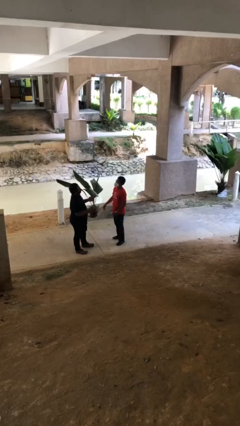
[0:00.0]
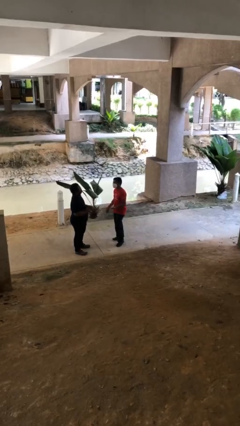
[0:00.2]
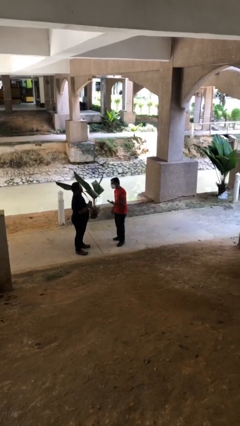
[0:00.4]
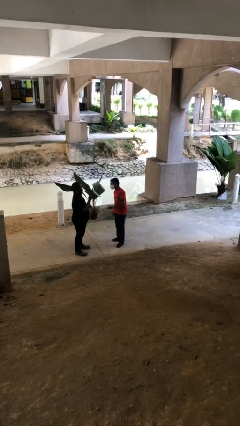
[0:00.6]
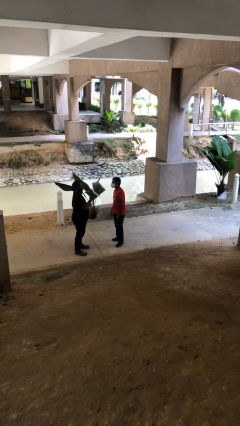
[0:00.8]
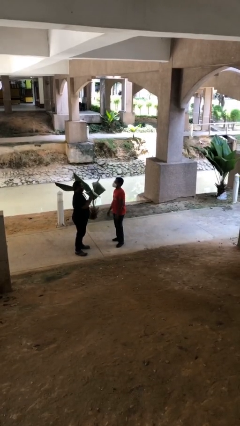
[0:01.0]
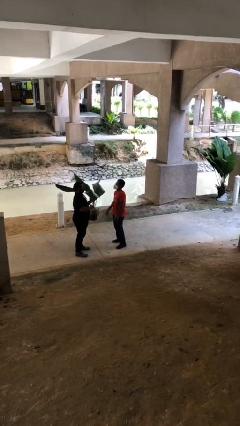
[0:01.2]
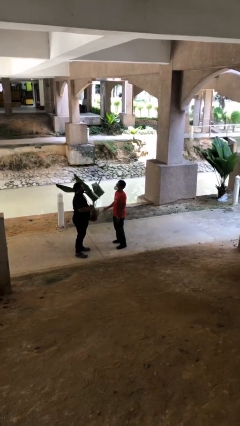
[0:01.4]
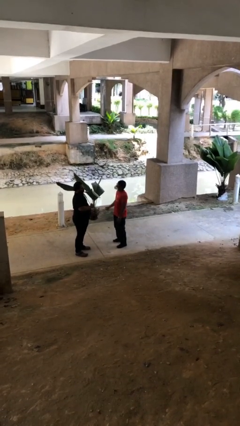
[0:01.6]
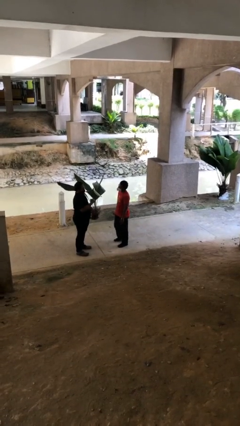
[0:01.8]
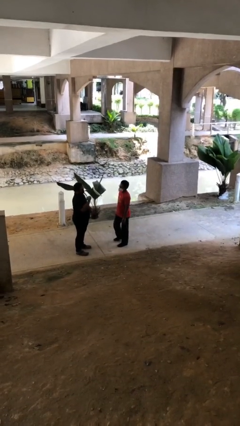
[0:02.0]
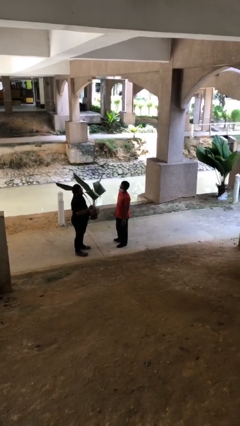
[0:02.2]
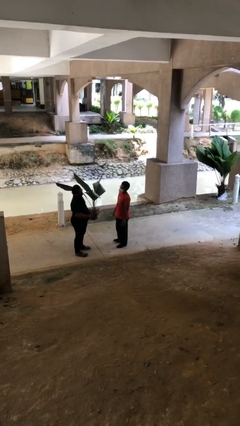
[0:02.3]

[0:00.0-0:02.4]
person talks to person

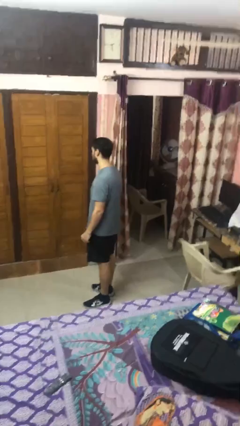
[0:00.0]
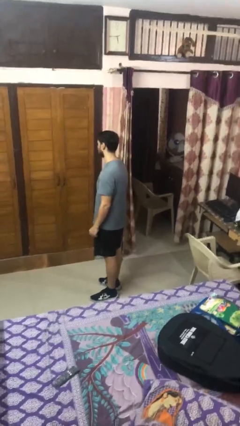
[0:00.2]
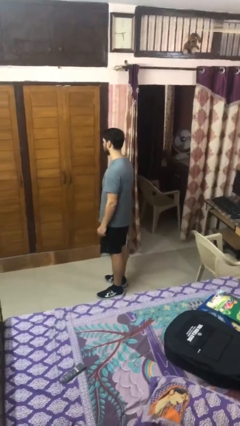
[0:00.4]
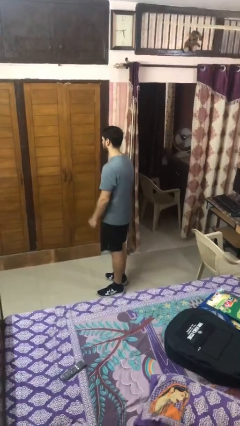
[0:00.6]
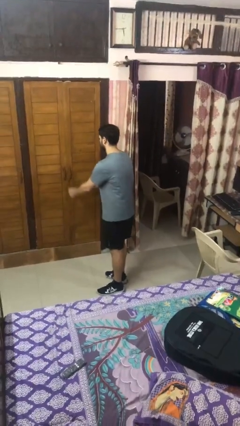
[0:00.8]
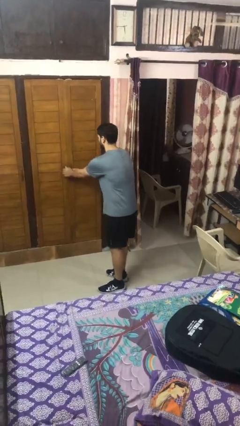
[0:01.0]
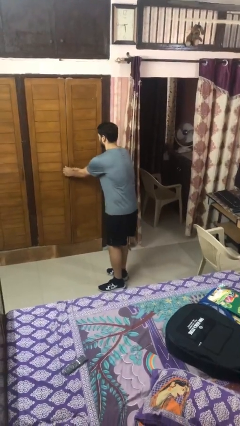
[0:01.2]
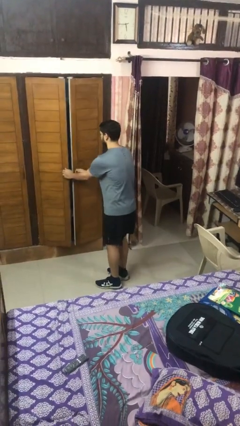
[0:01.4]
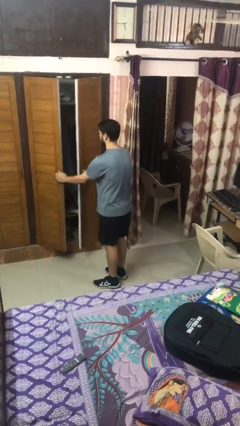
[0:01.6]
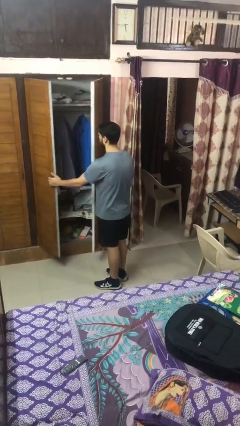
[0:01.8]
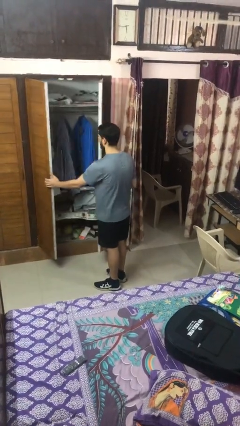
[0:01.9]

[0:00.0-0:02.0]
person opens closet door

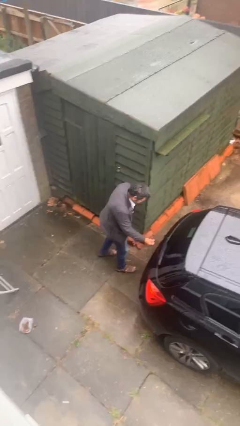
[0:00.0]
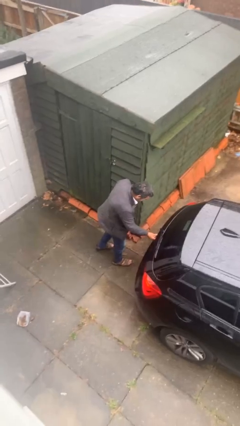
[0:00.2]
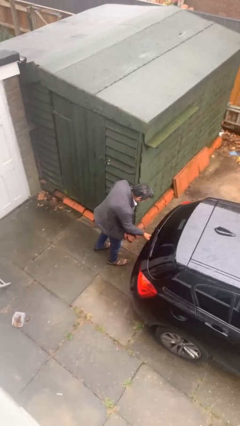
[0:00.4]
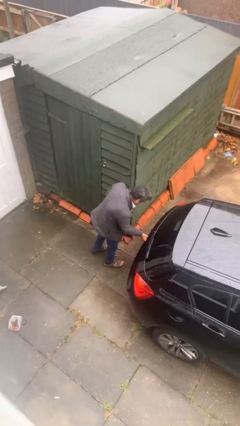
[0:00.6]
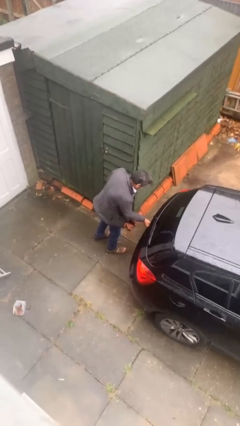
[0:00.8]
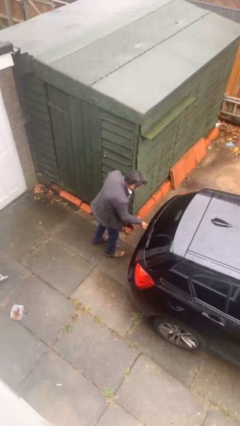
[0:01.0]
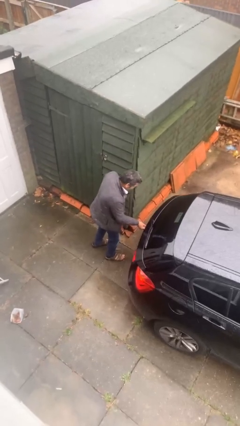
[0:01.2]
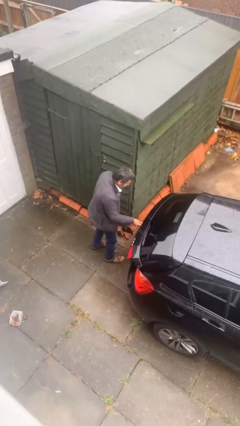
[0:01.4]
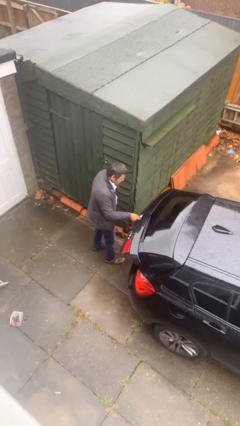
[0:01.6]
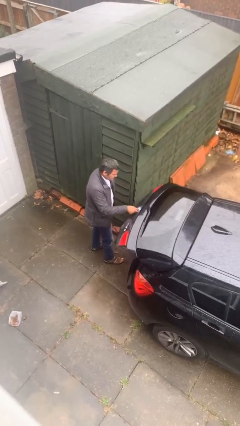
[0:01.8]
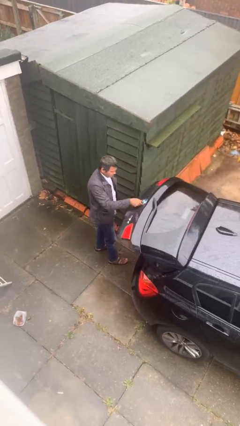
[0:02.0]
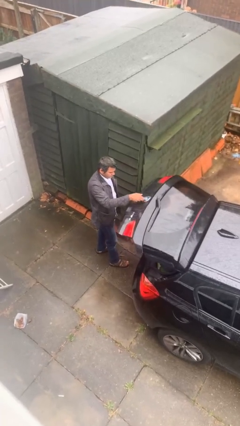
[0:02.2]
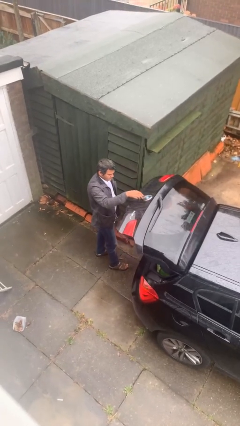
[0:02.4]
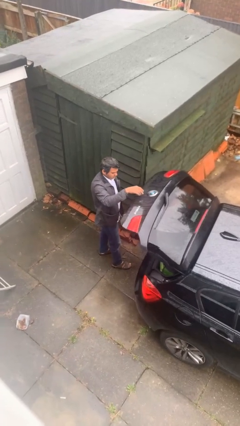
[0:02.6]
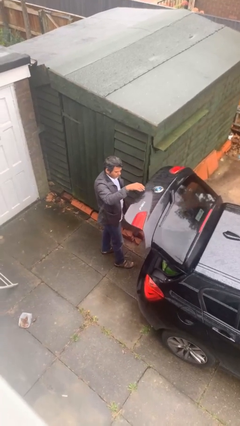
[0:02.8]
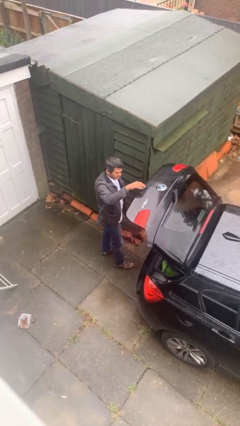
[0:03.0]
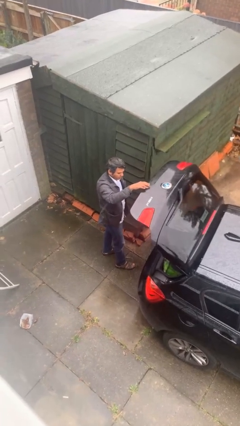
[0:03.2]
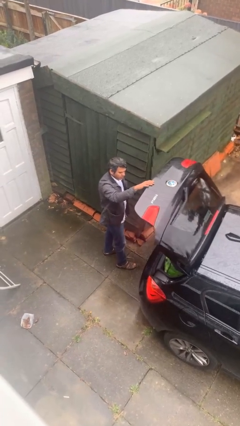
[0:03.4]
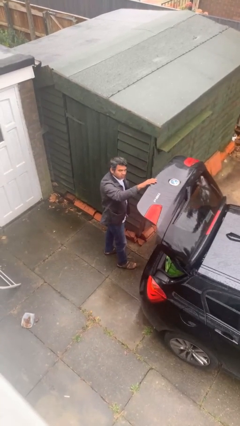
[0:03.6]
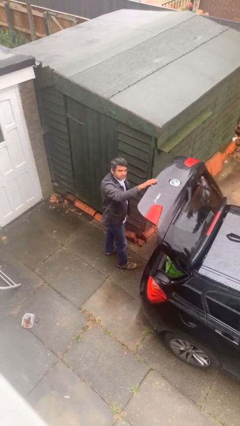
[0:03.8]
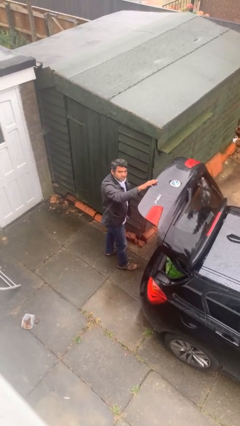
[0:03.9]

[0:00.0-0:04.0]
person opens car trunk

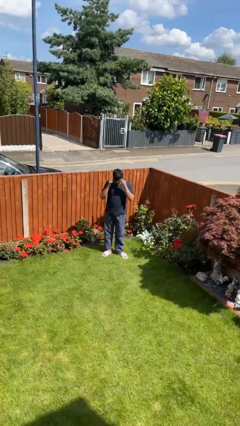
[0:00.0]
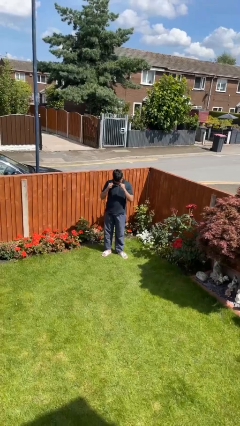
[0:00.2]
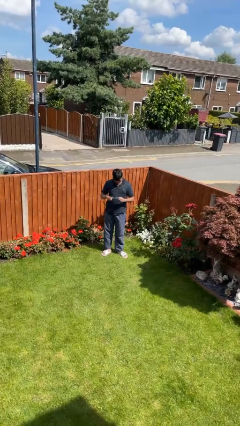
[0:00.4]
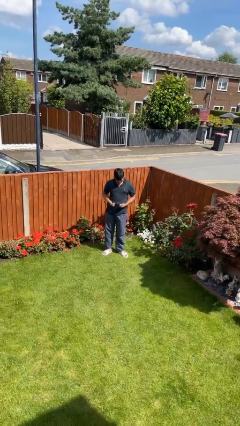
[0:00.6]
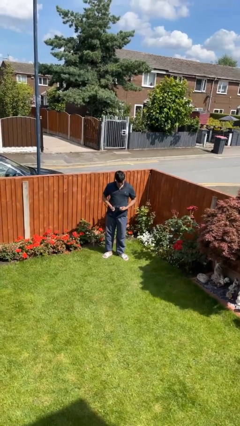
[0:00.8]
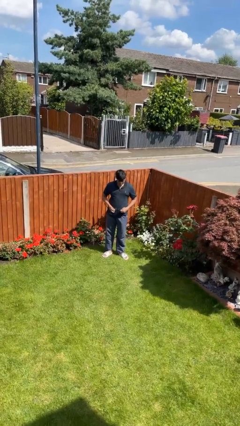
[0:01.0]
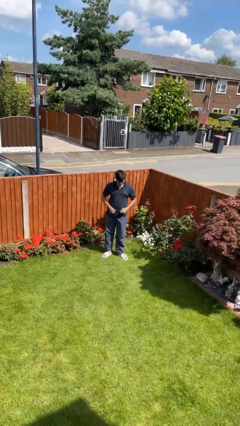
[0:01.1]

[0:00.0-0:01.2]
person takes off glasses

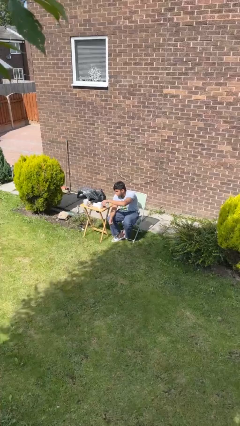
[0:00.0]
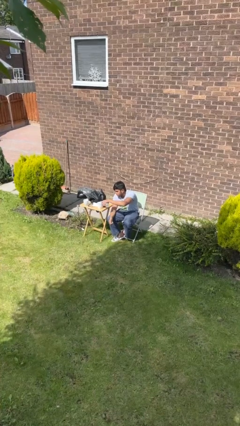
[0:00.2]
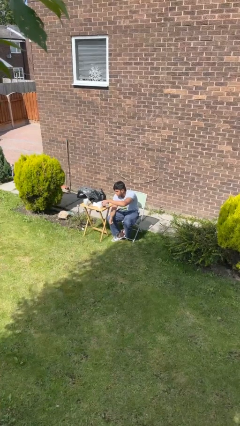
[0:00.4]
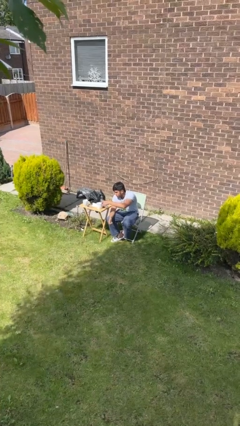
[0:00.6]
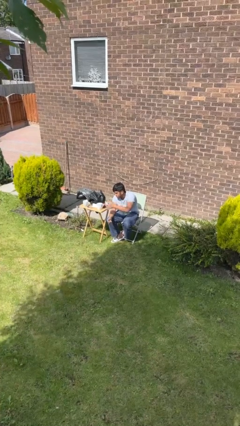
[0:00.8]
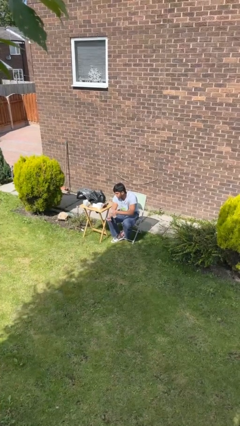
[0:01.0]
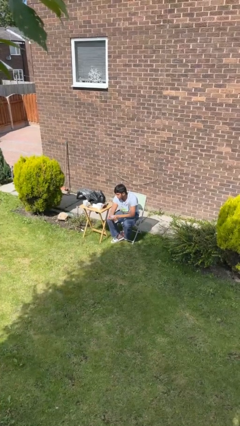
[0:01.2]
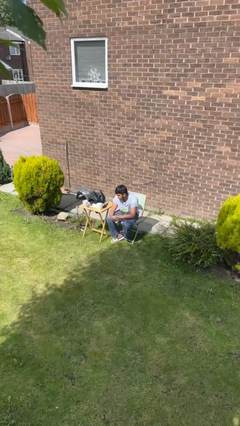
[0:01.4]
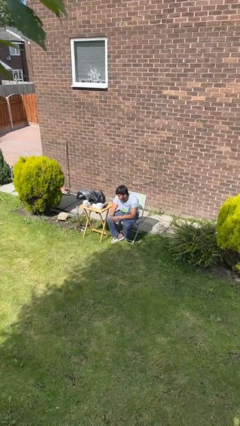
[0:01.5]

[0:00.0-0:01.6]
person screws lid to bottle

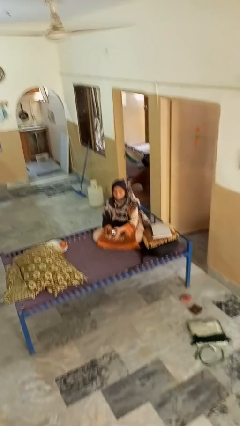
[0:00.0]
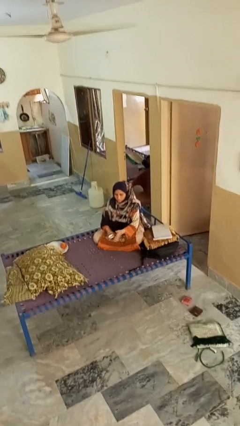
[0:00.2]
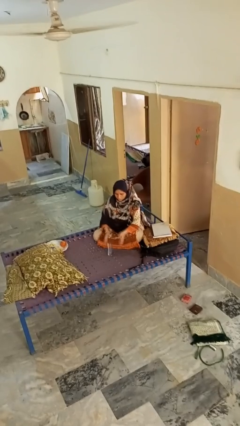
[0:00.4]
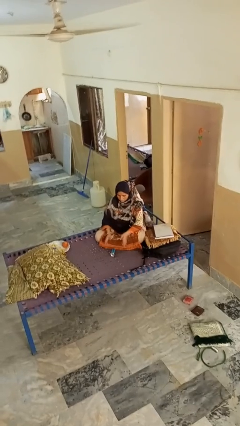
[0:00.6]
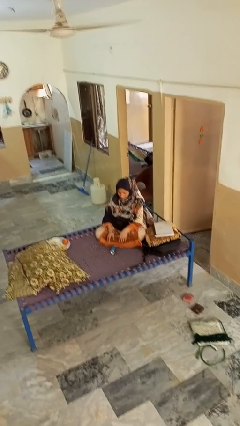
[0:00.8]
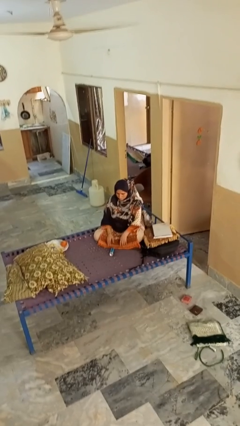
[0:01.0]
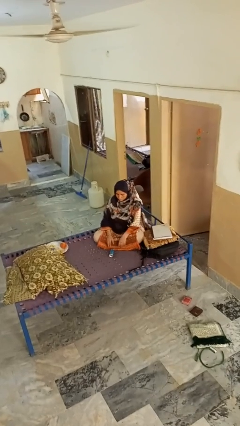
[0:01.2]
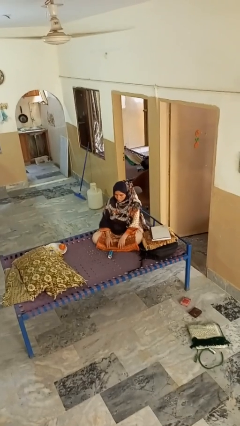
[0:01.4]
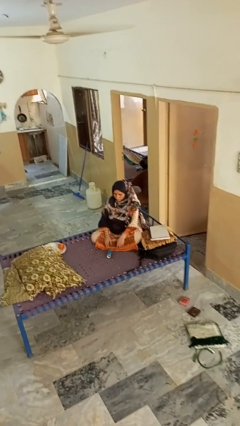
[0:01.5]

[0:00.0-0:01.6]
person catches dropped object

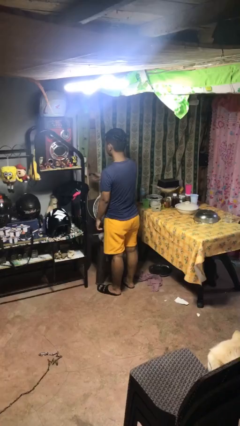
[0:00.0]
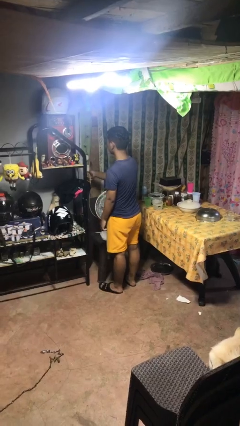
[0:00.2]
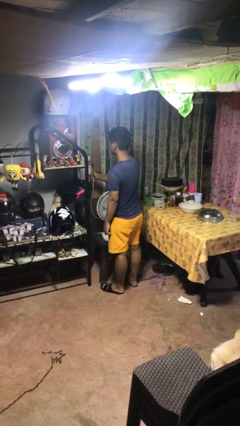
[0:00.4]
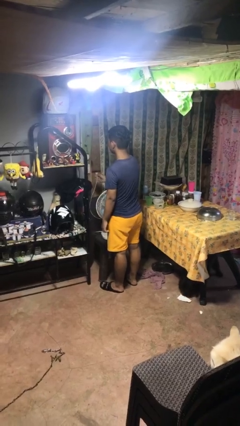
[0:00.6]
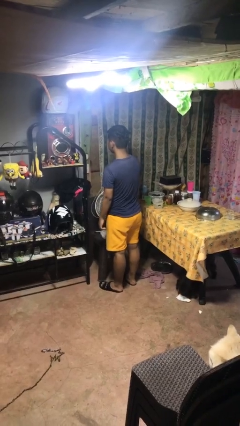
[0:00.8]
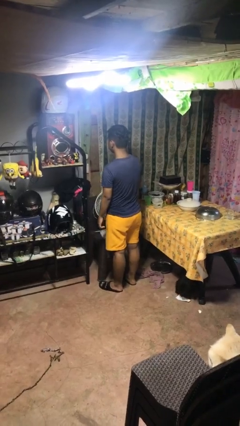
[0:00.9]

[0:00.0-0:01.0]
person unplugs from electrical socket

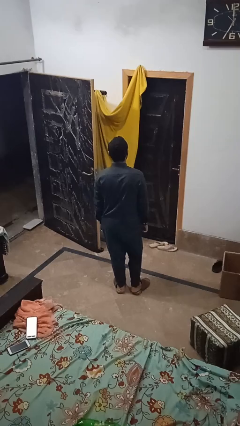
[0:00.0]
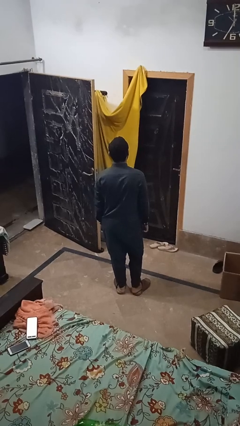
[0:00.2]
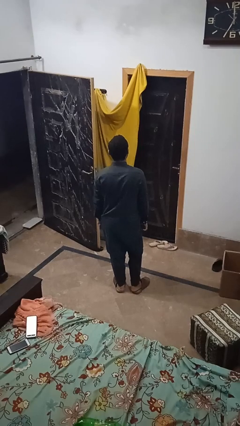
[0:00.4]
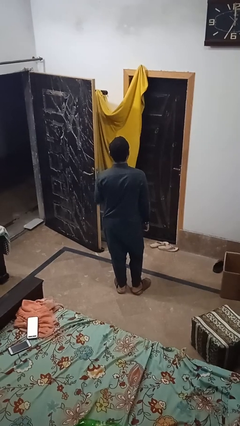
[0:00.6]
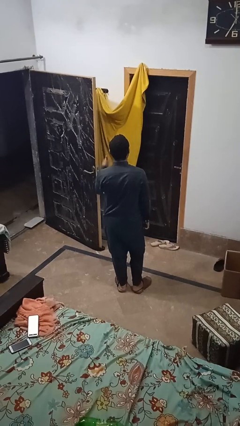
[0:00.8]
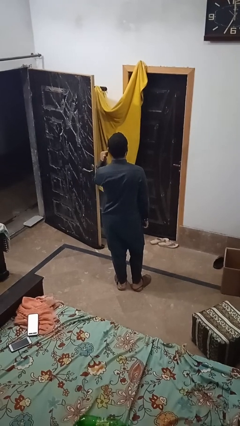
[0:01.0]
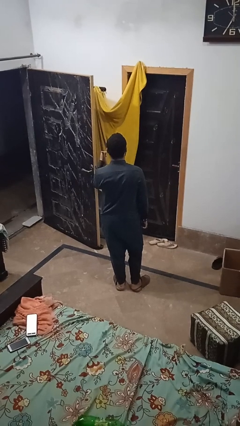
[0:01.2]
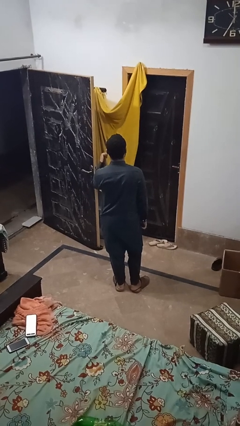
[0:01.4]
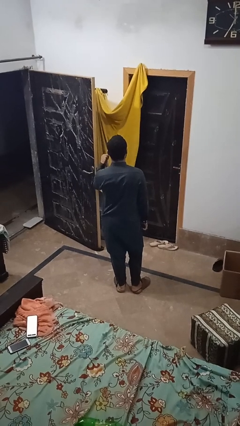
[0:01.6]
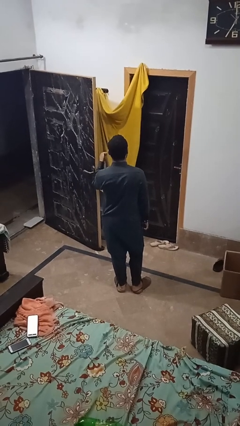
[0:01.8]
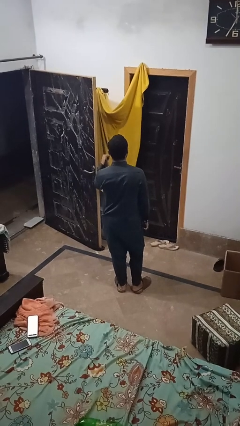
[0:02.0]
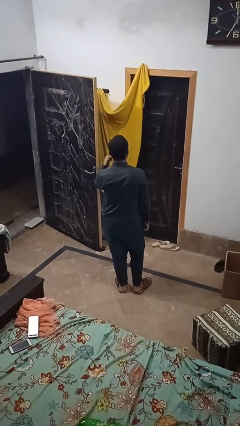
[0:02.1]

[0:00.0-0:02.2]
person gestures behind me

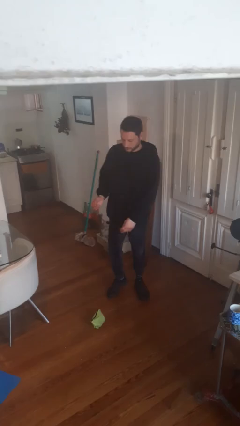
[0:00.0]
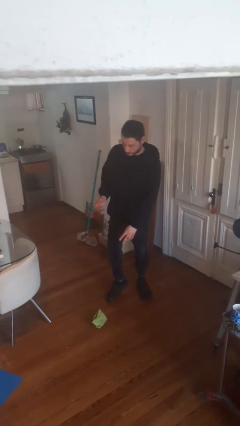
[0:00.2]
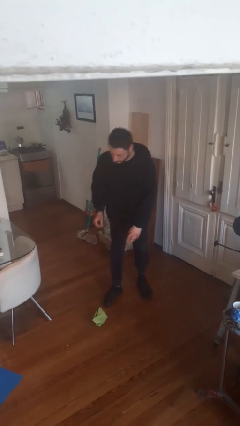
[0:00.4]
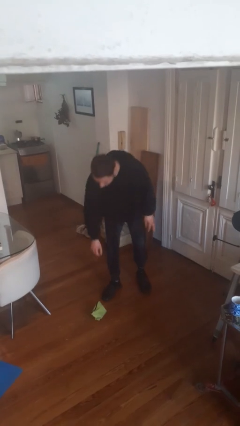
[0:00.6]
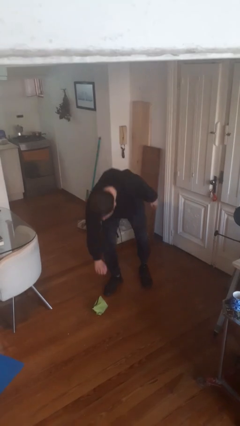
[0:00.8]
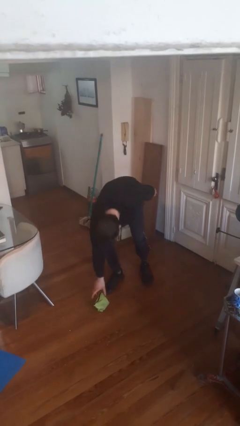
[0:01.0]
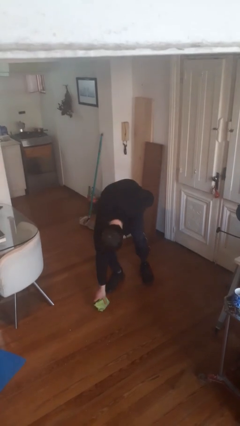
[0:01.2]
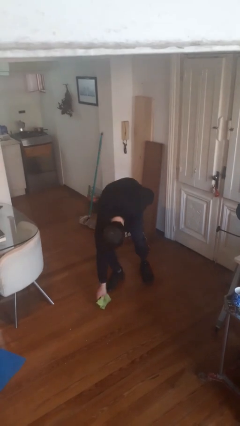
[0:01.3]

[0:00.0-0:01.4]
person drops object
